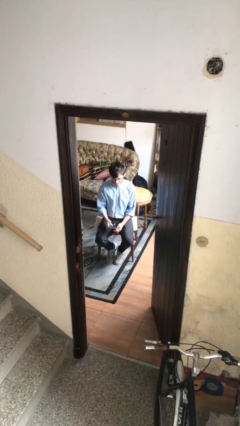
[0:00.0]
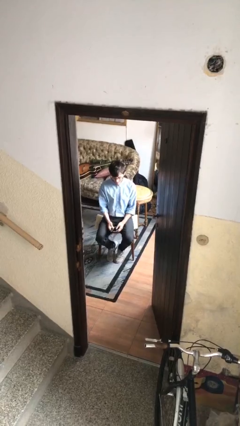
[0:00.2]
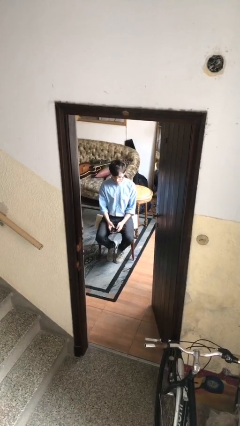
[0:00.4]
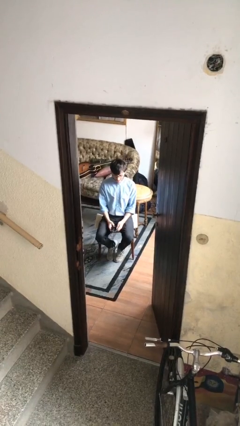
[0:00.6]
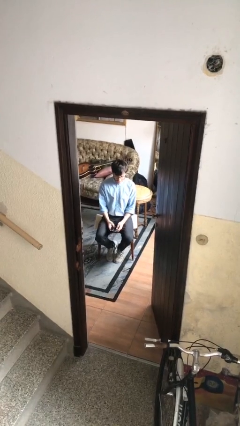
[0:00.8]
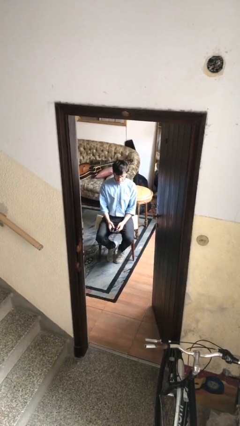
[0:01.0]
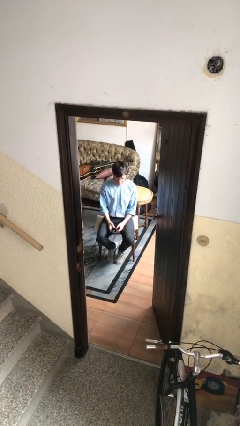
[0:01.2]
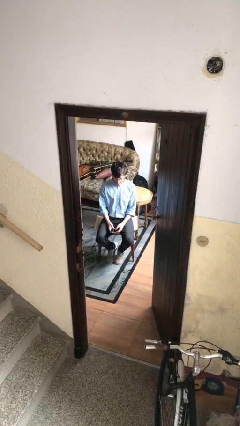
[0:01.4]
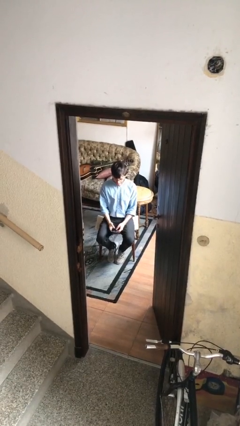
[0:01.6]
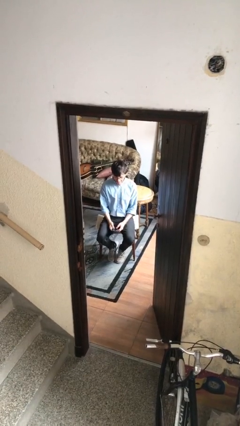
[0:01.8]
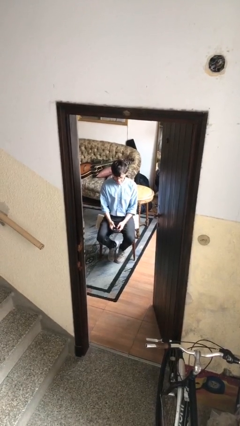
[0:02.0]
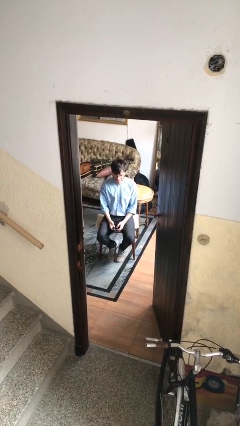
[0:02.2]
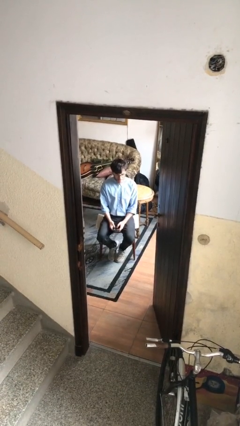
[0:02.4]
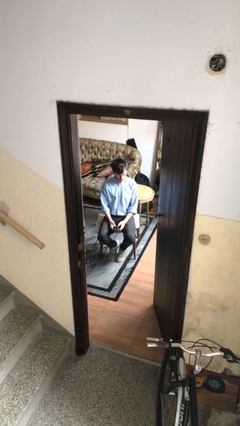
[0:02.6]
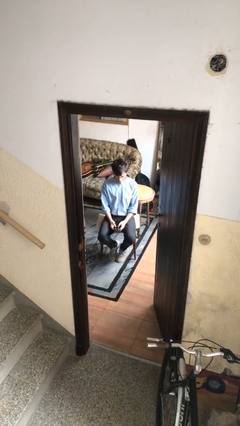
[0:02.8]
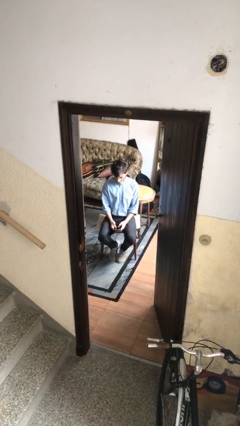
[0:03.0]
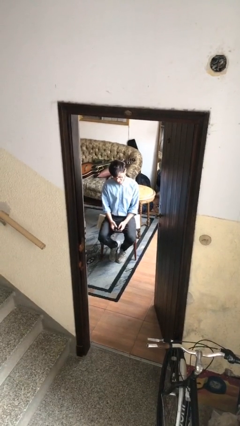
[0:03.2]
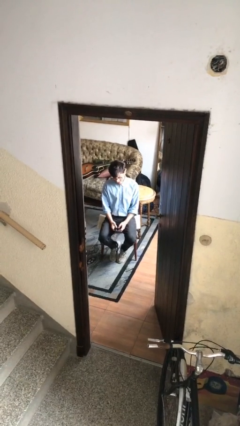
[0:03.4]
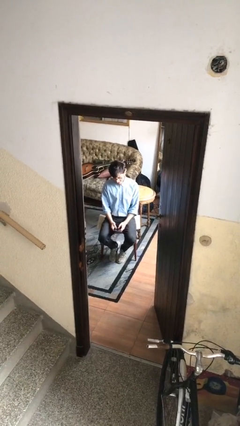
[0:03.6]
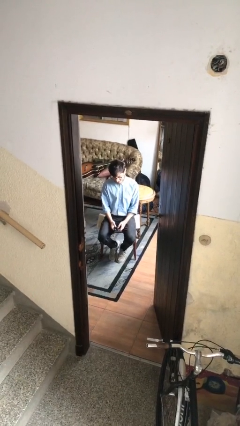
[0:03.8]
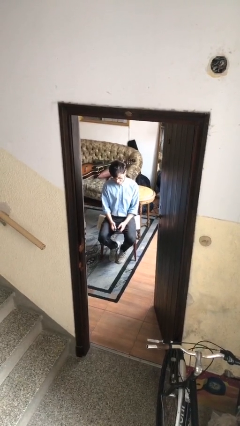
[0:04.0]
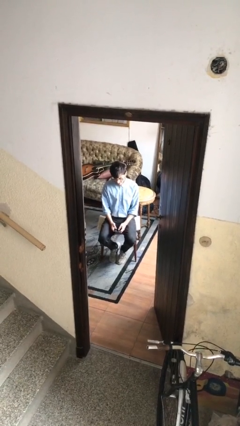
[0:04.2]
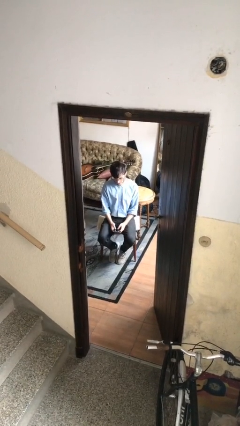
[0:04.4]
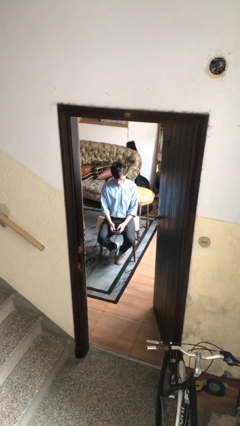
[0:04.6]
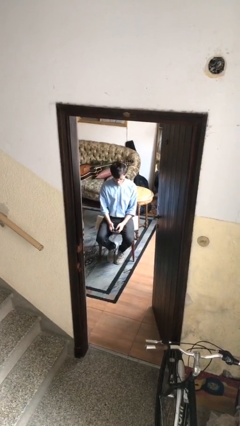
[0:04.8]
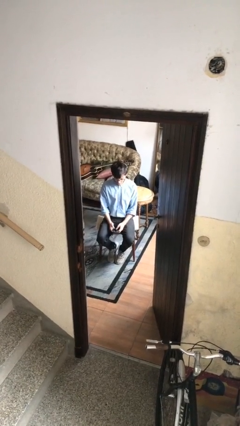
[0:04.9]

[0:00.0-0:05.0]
person texts on phone

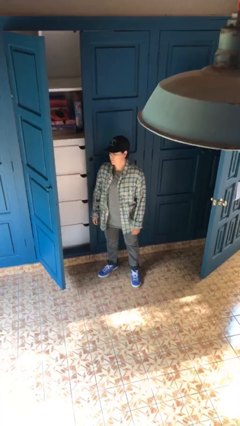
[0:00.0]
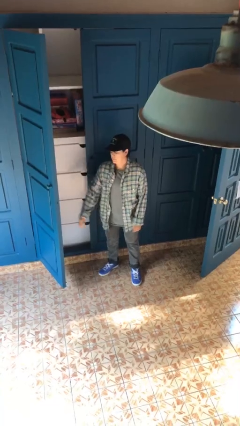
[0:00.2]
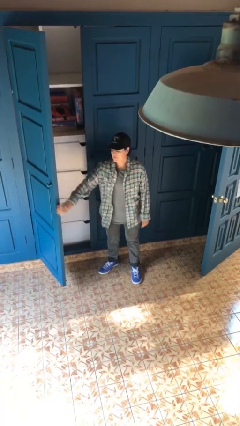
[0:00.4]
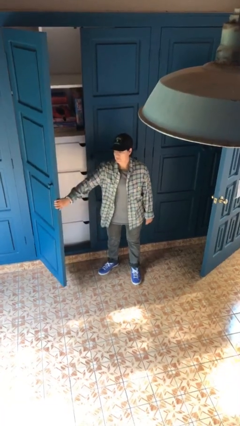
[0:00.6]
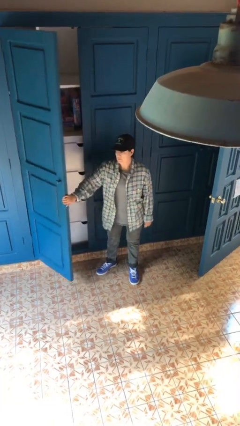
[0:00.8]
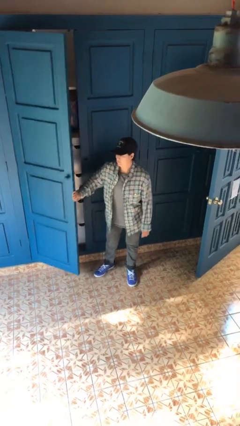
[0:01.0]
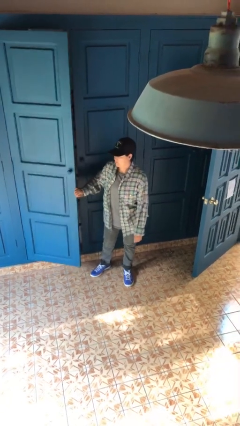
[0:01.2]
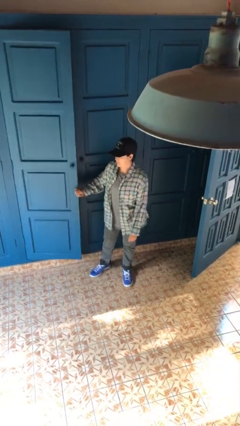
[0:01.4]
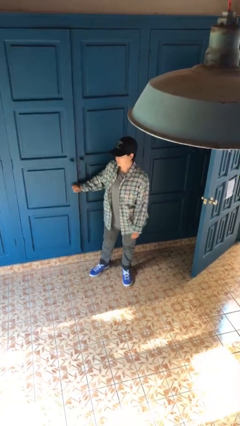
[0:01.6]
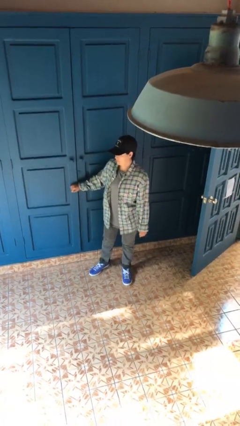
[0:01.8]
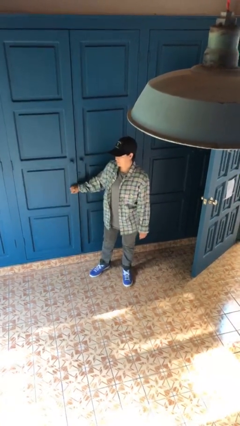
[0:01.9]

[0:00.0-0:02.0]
person closes closet door

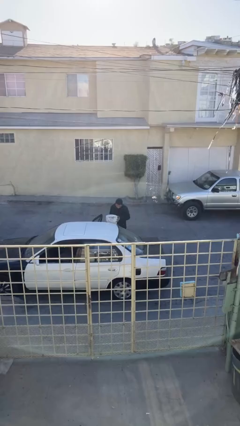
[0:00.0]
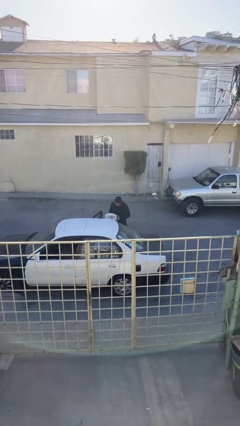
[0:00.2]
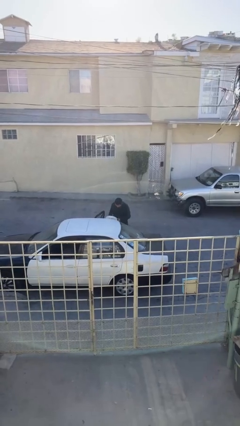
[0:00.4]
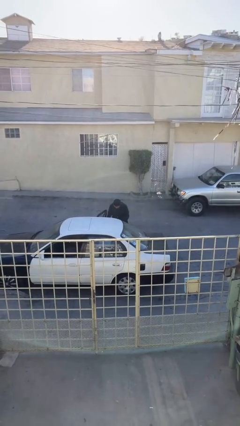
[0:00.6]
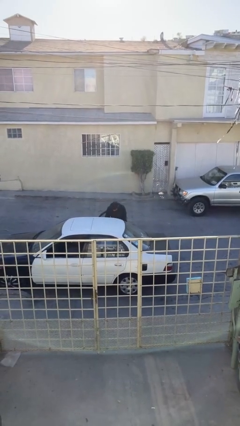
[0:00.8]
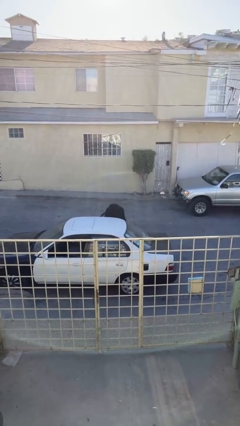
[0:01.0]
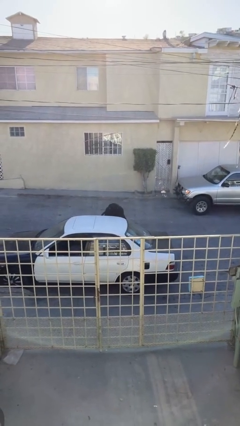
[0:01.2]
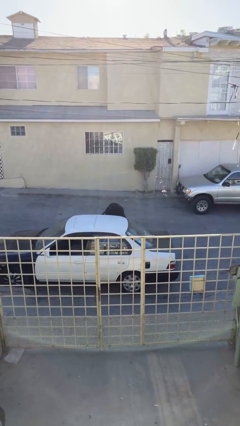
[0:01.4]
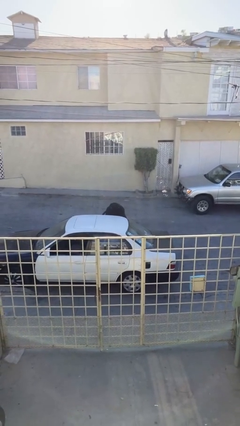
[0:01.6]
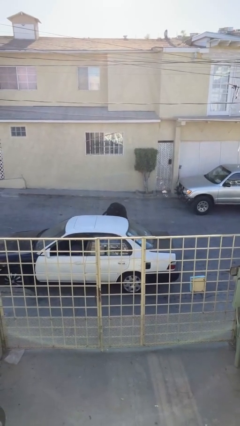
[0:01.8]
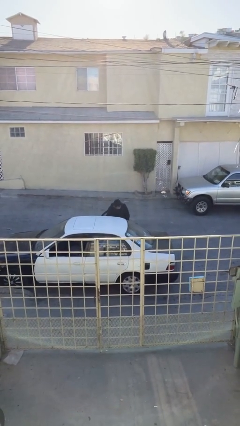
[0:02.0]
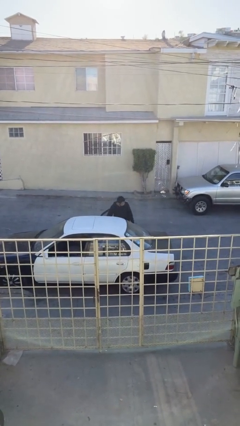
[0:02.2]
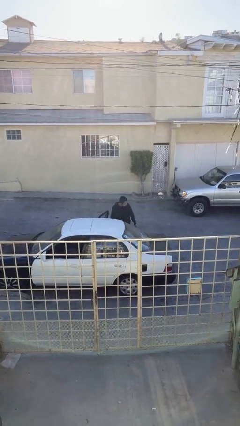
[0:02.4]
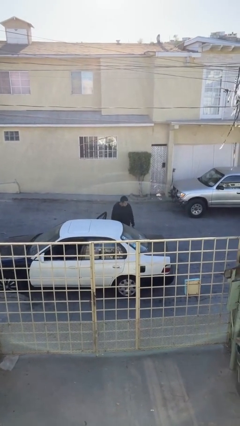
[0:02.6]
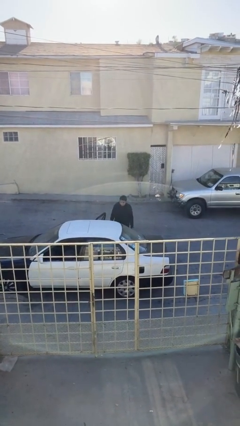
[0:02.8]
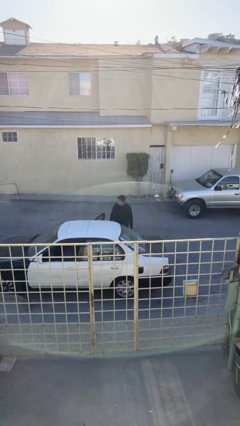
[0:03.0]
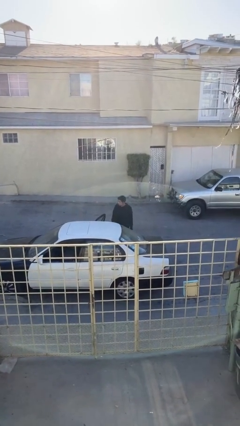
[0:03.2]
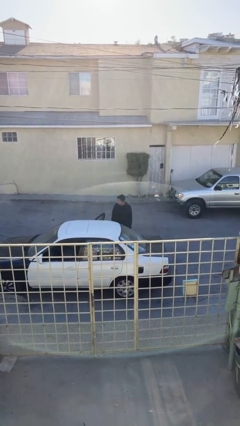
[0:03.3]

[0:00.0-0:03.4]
person loads car

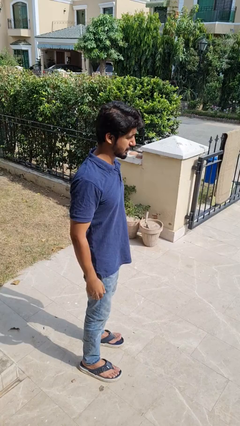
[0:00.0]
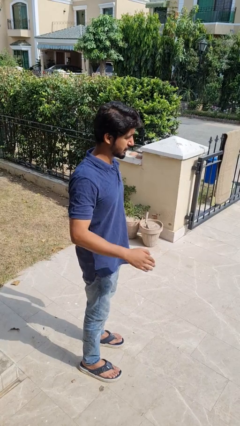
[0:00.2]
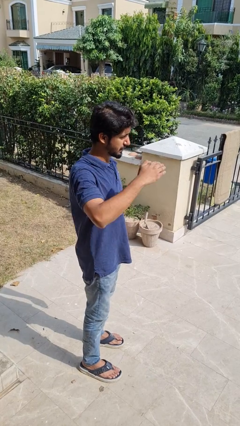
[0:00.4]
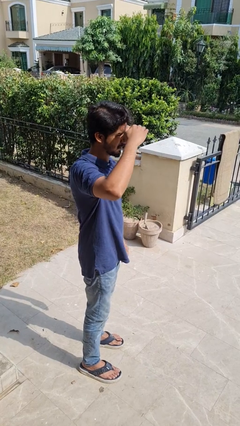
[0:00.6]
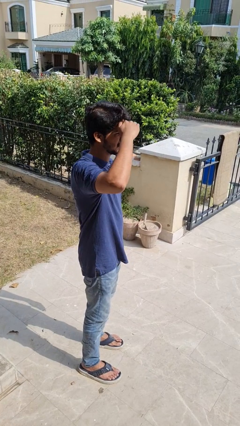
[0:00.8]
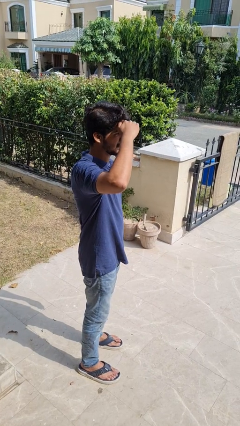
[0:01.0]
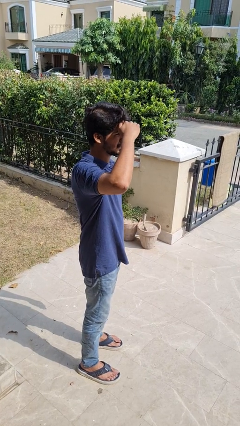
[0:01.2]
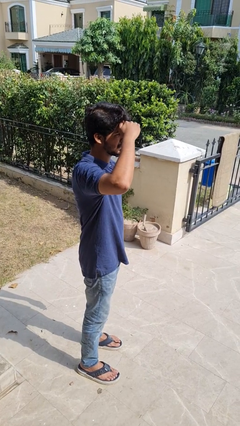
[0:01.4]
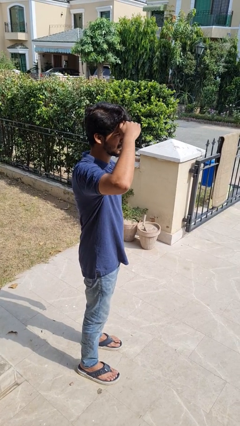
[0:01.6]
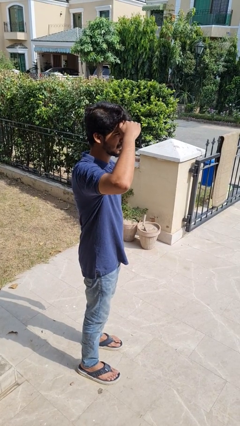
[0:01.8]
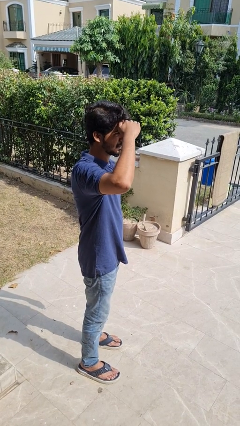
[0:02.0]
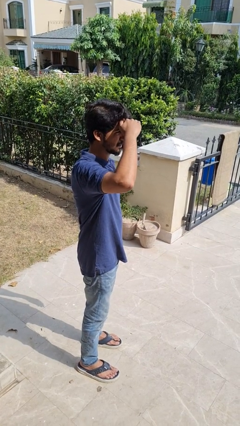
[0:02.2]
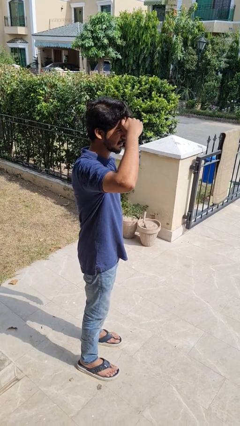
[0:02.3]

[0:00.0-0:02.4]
person shades eyes

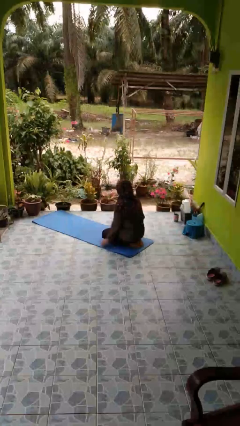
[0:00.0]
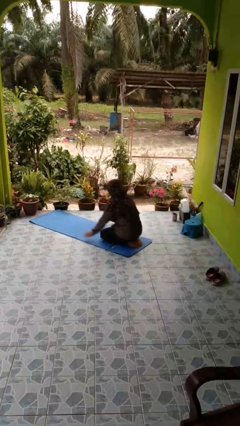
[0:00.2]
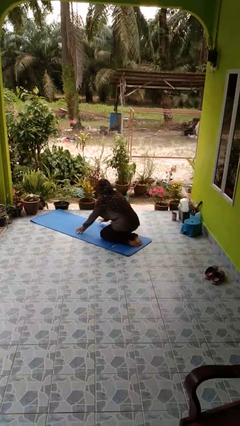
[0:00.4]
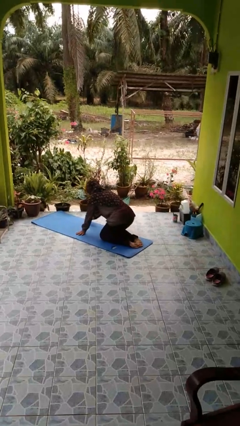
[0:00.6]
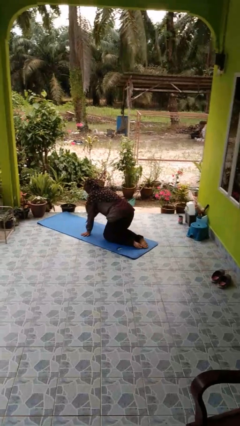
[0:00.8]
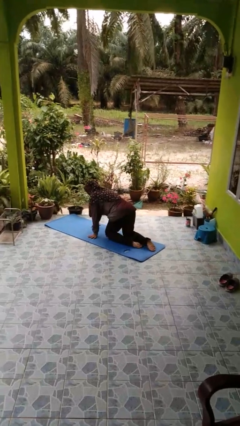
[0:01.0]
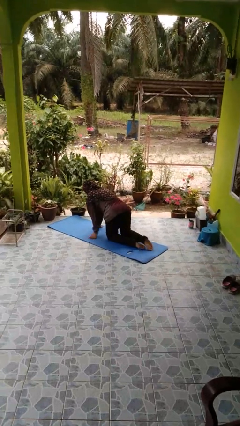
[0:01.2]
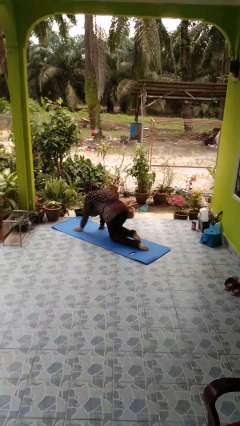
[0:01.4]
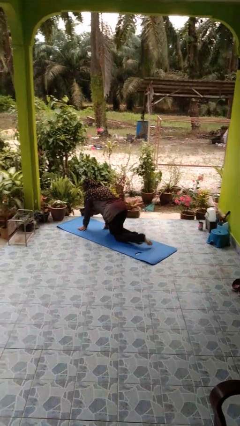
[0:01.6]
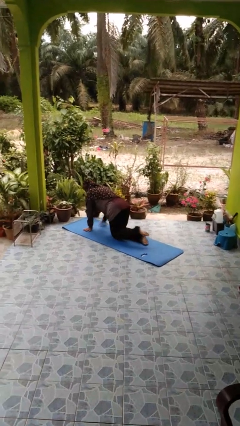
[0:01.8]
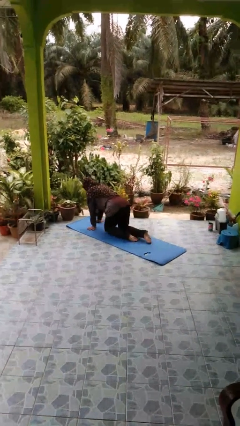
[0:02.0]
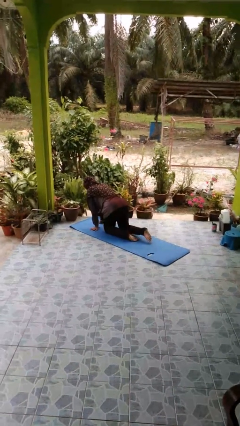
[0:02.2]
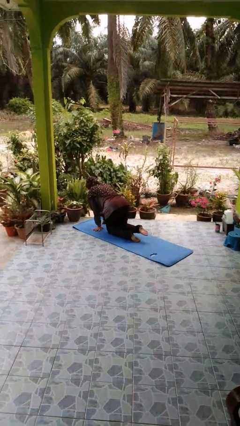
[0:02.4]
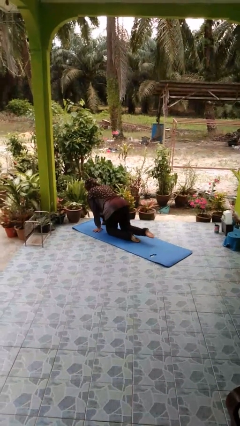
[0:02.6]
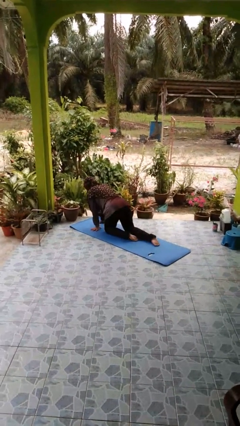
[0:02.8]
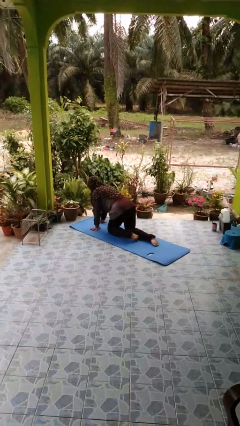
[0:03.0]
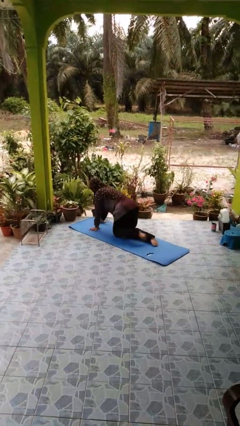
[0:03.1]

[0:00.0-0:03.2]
person crawls

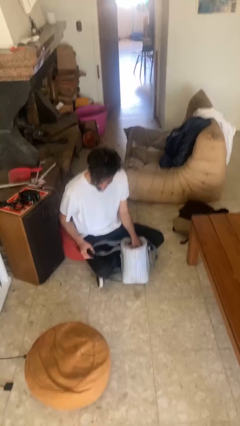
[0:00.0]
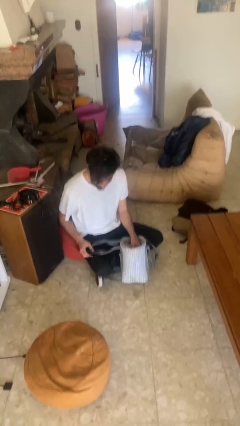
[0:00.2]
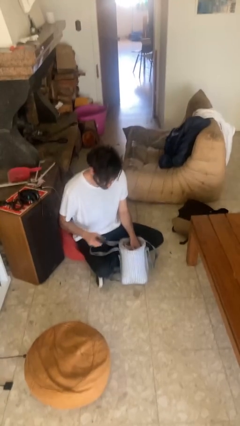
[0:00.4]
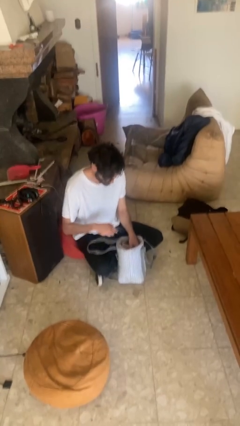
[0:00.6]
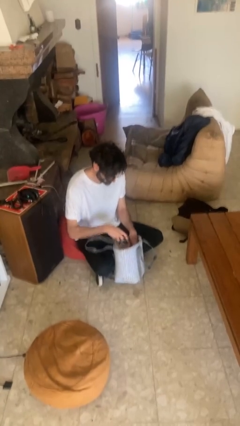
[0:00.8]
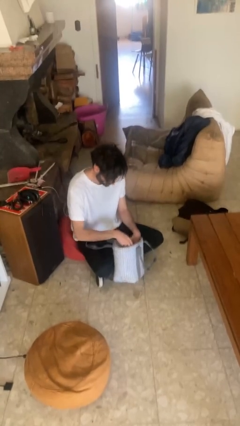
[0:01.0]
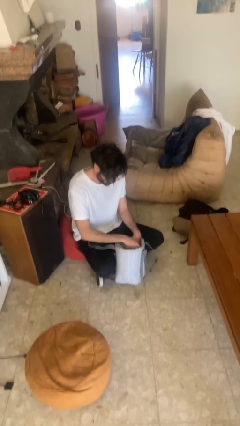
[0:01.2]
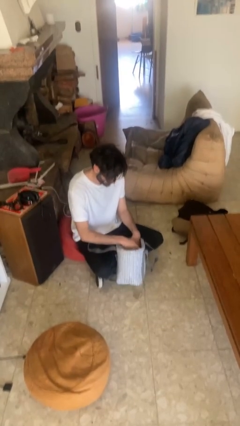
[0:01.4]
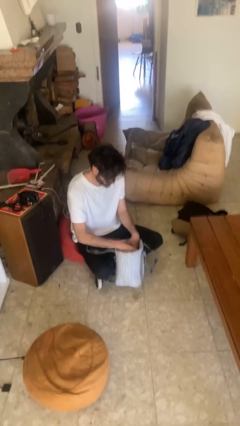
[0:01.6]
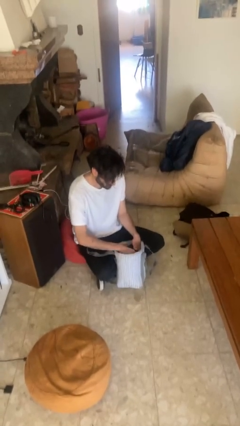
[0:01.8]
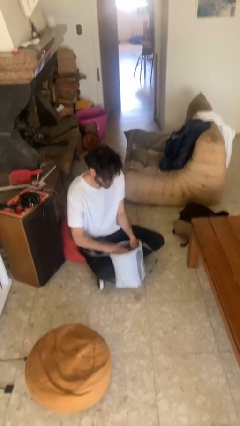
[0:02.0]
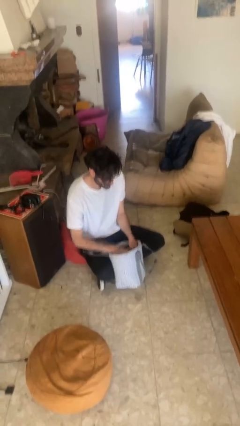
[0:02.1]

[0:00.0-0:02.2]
person puts object into purse
